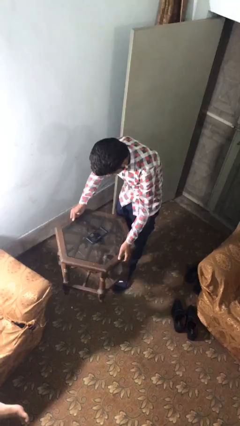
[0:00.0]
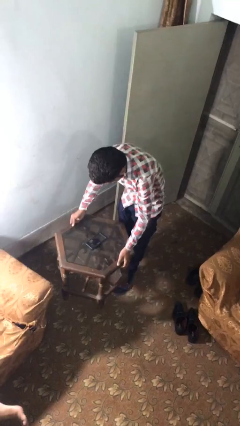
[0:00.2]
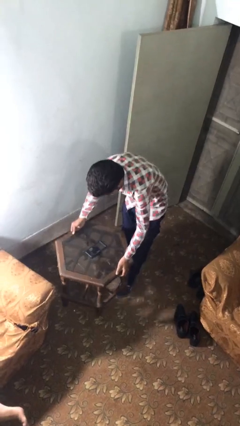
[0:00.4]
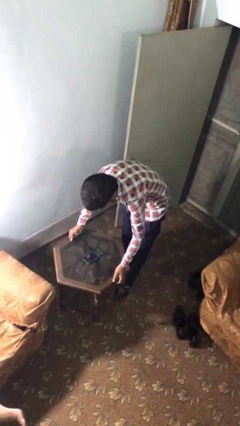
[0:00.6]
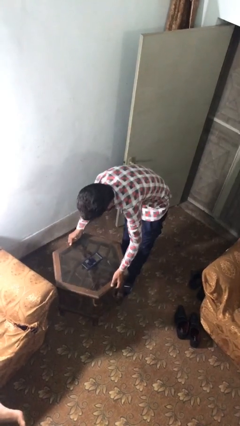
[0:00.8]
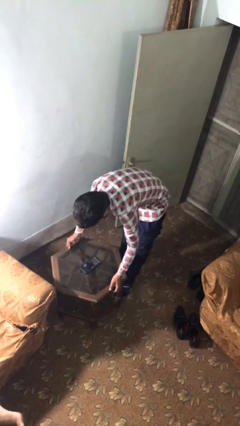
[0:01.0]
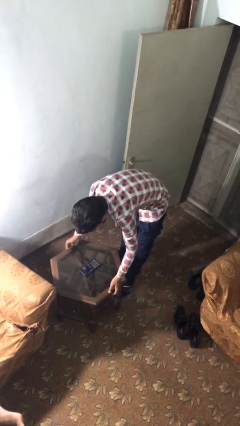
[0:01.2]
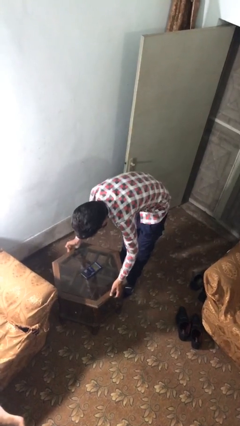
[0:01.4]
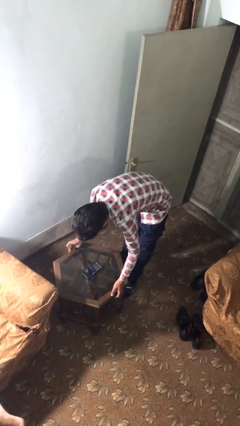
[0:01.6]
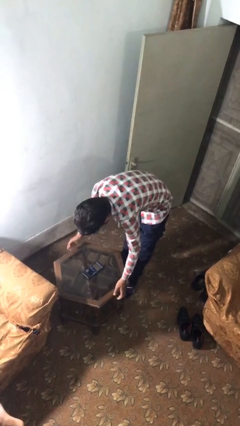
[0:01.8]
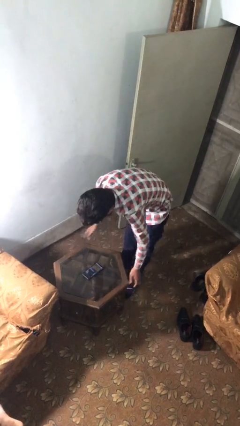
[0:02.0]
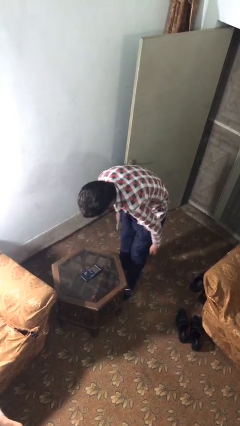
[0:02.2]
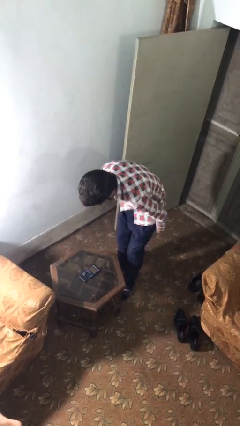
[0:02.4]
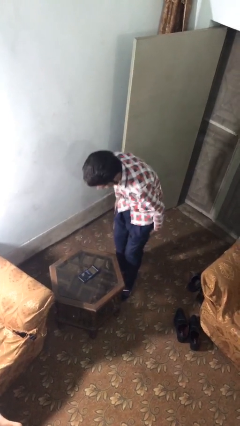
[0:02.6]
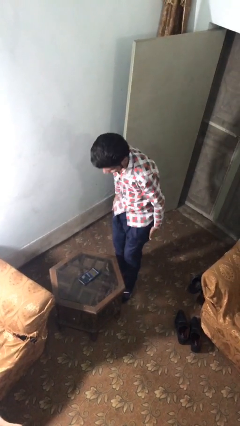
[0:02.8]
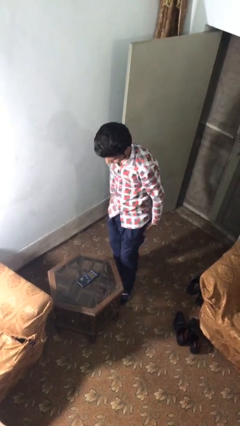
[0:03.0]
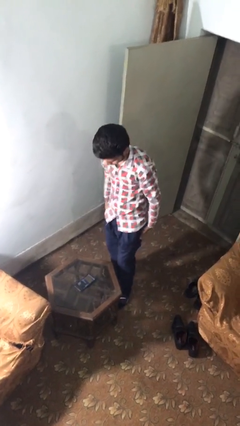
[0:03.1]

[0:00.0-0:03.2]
person puts down object on floor

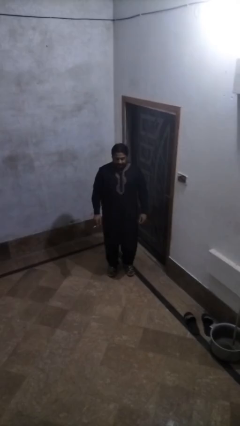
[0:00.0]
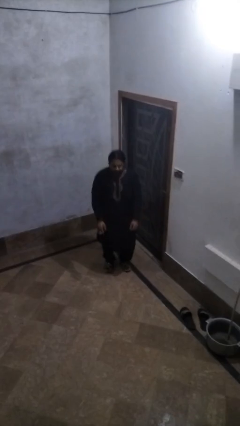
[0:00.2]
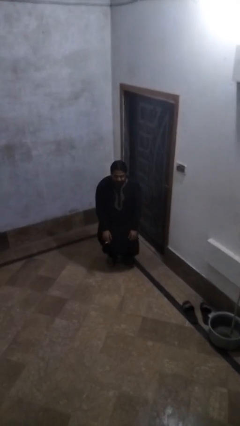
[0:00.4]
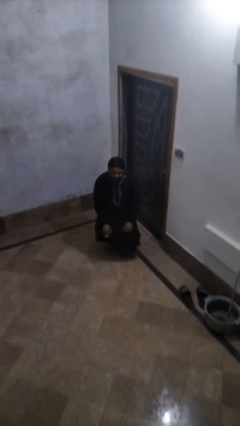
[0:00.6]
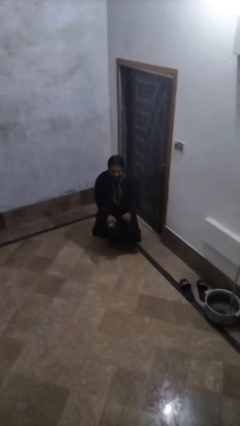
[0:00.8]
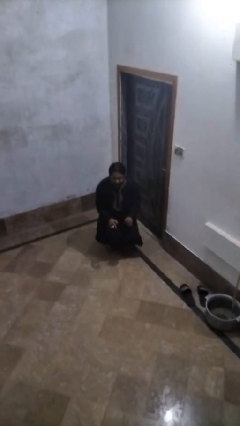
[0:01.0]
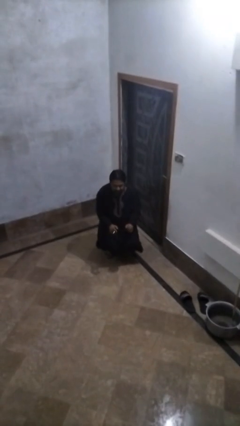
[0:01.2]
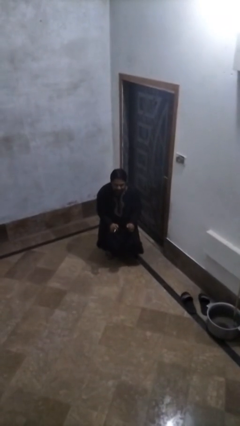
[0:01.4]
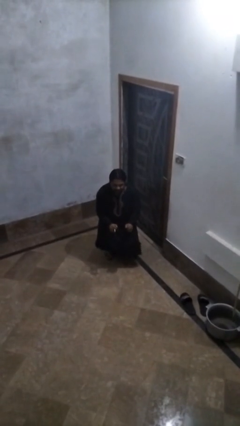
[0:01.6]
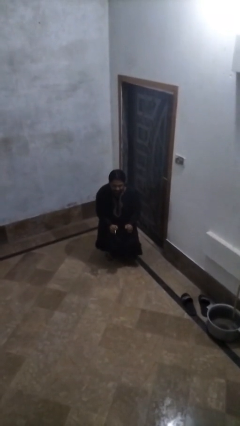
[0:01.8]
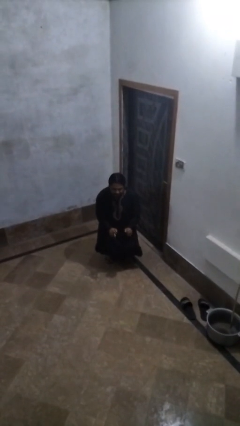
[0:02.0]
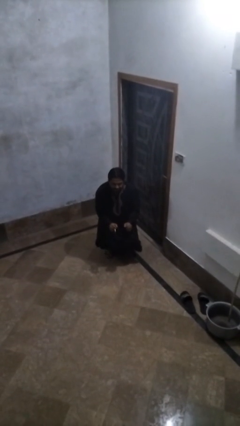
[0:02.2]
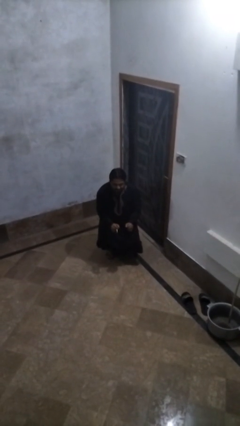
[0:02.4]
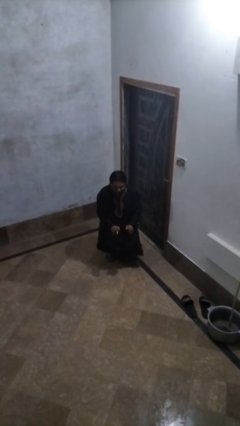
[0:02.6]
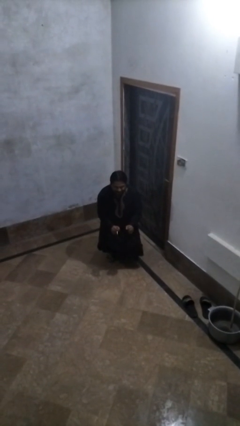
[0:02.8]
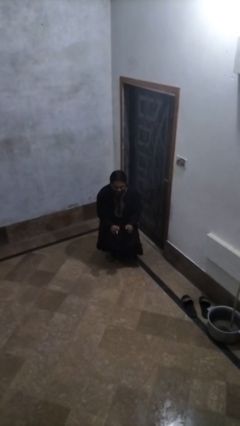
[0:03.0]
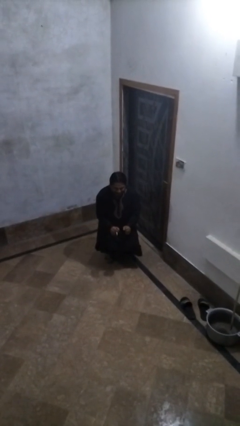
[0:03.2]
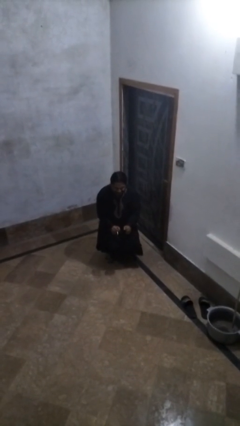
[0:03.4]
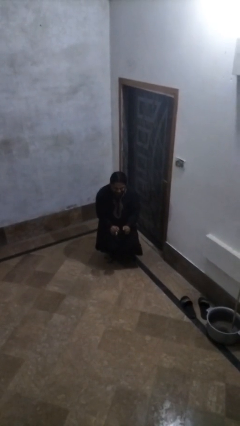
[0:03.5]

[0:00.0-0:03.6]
person squats

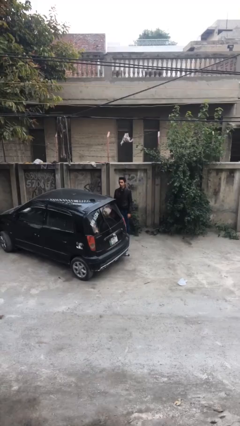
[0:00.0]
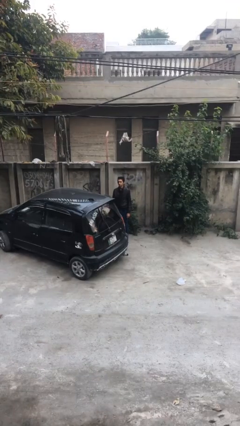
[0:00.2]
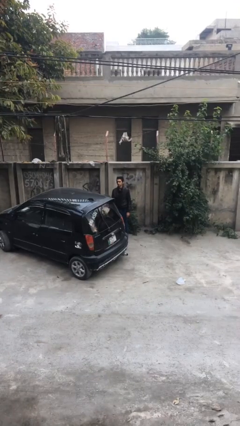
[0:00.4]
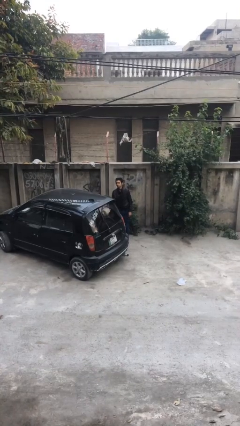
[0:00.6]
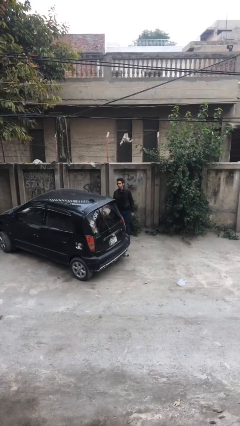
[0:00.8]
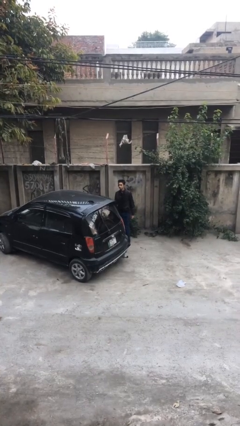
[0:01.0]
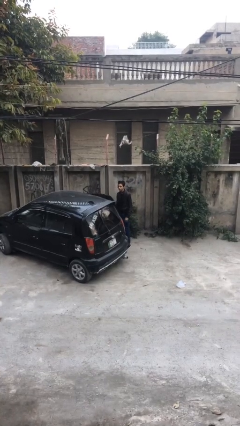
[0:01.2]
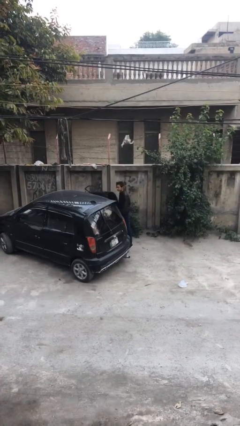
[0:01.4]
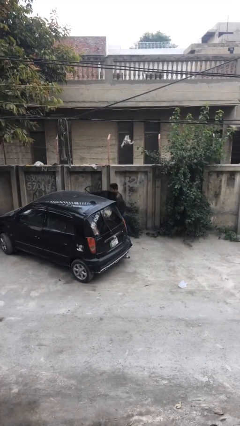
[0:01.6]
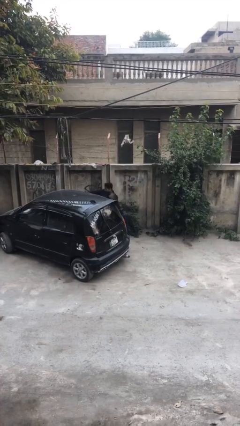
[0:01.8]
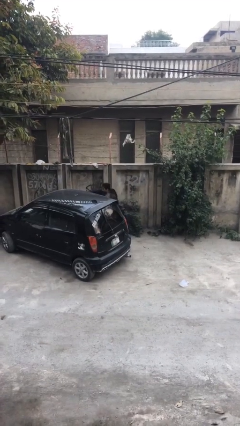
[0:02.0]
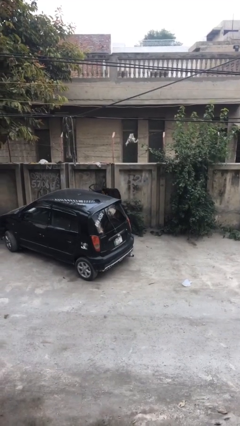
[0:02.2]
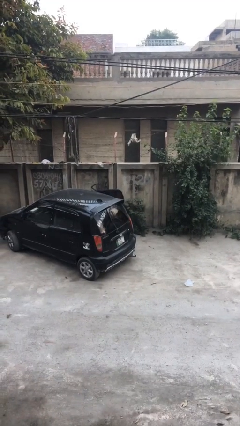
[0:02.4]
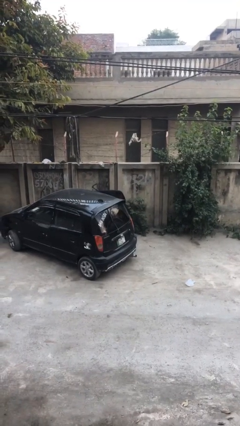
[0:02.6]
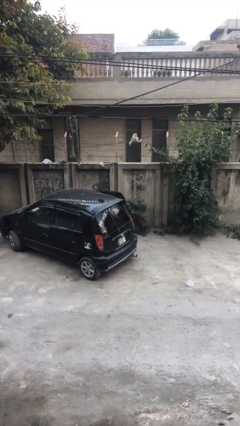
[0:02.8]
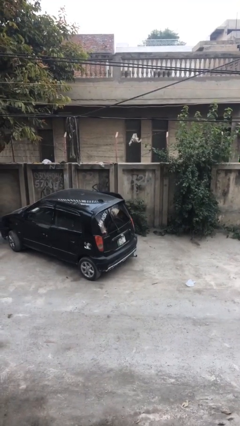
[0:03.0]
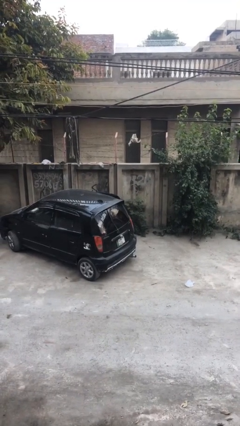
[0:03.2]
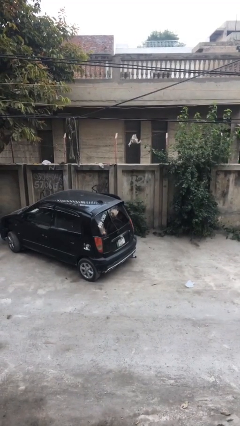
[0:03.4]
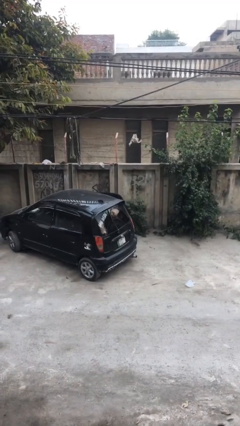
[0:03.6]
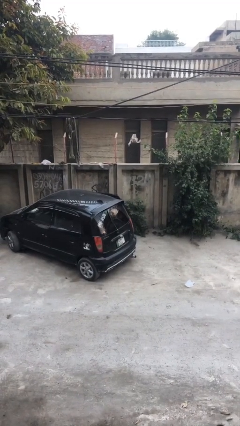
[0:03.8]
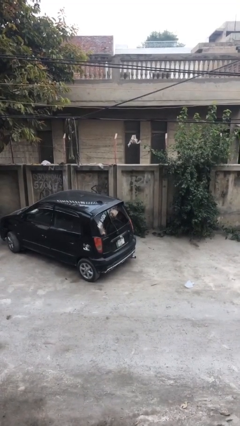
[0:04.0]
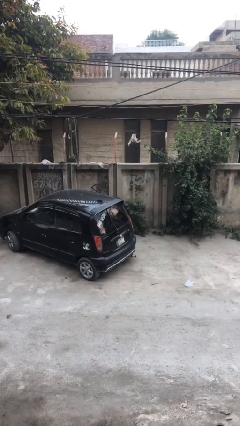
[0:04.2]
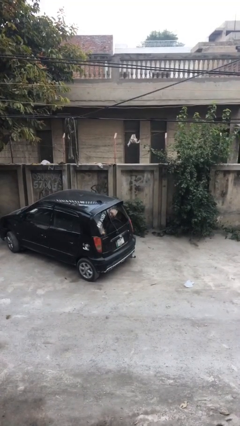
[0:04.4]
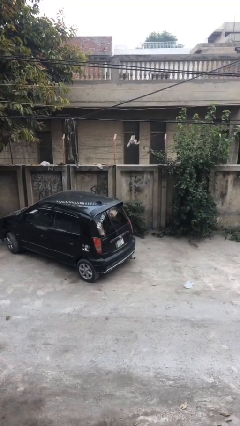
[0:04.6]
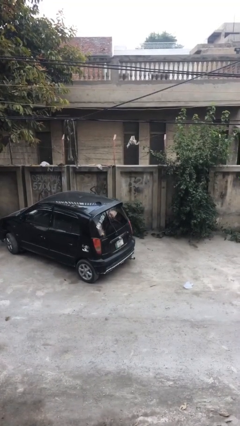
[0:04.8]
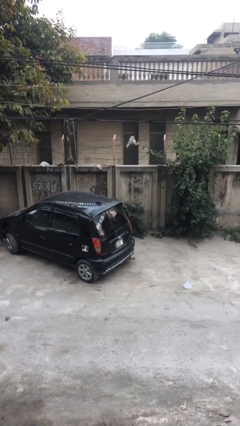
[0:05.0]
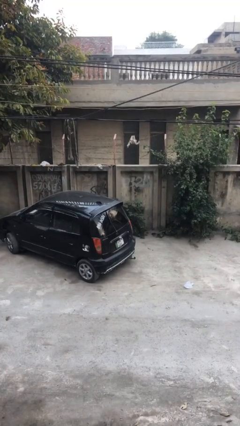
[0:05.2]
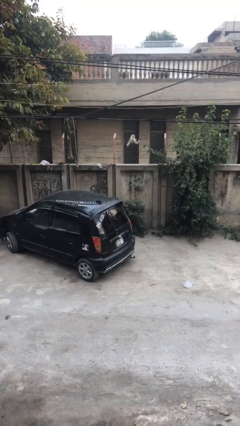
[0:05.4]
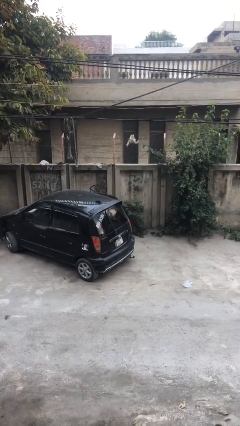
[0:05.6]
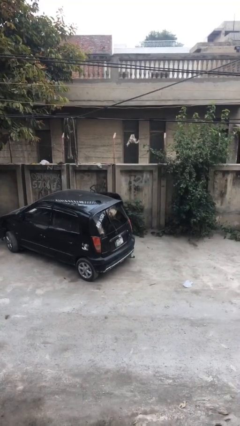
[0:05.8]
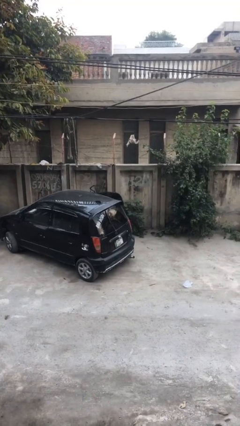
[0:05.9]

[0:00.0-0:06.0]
person enters car

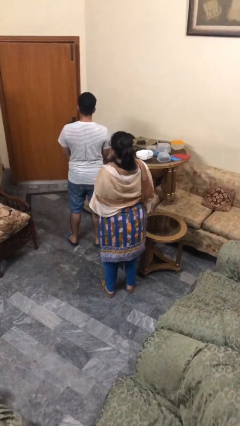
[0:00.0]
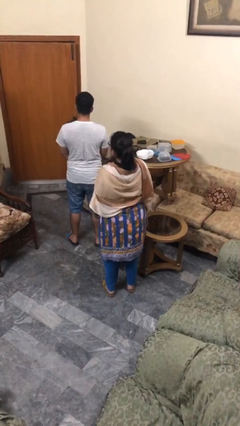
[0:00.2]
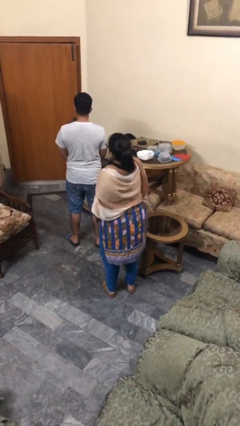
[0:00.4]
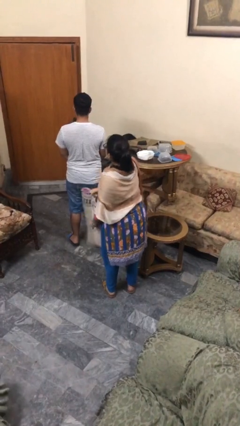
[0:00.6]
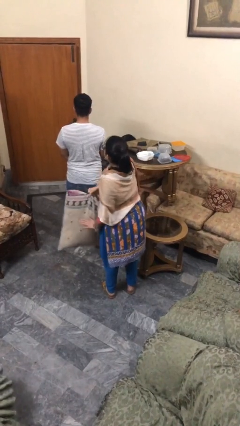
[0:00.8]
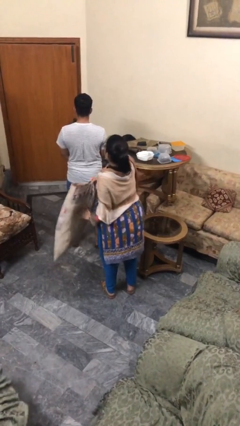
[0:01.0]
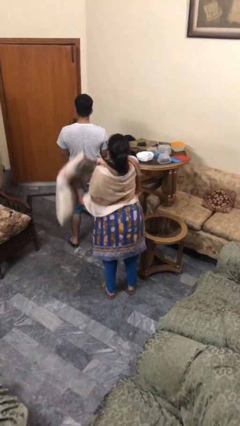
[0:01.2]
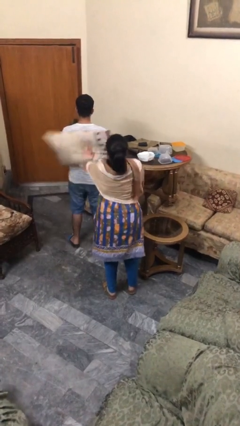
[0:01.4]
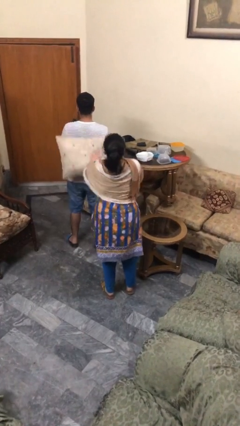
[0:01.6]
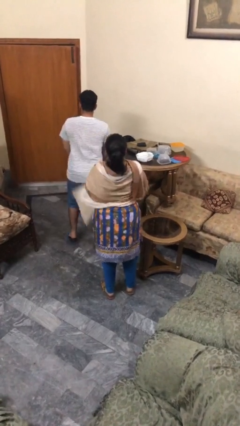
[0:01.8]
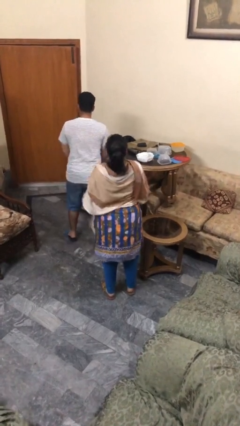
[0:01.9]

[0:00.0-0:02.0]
person hits person with pillow

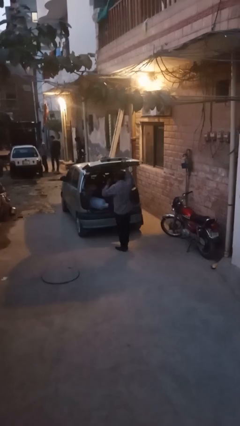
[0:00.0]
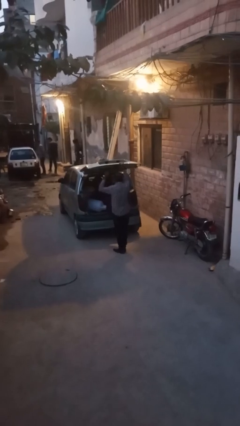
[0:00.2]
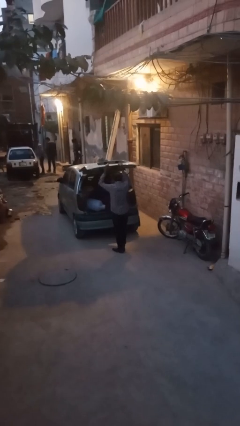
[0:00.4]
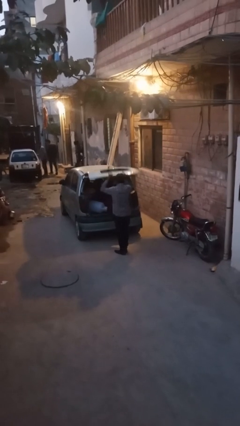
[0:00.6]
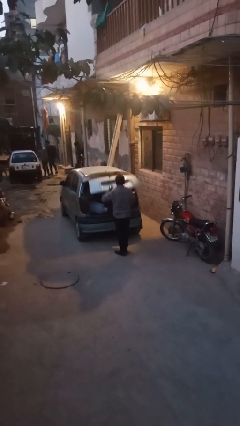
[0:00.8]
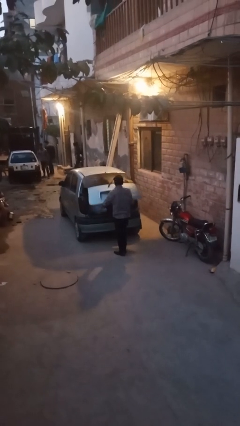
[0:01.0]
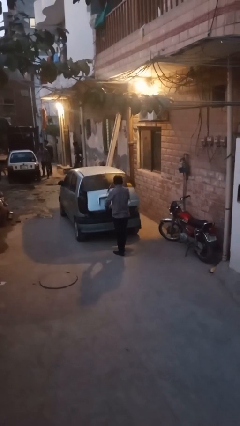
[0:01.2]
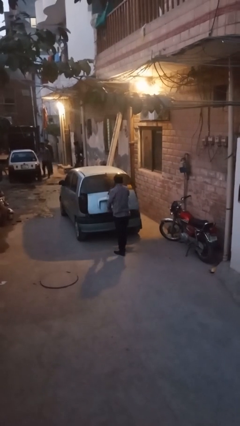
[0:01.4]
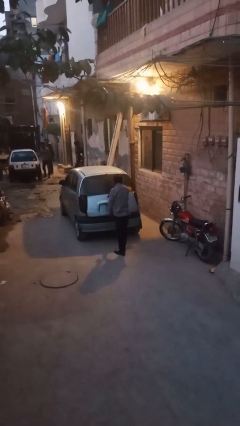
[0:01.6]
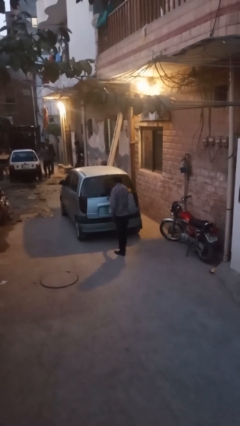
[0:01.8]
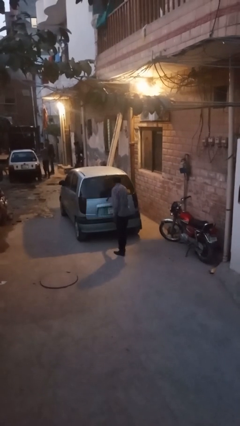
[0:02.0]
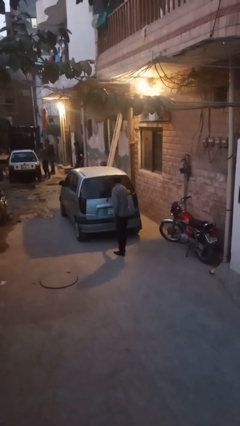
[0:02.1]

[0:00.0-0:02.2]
person closes car trunk

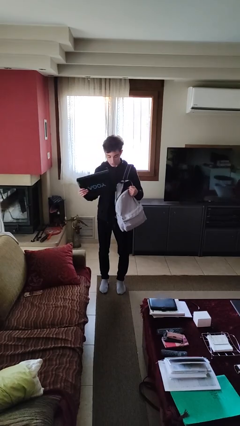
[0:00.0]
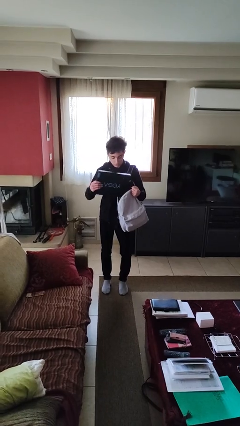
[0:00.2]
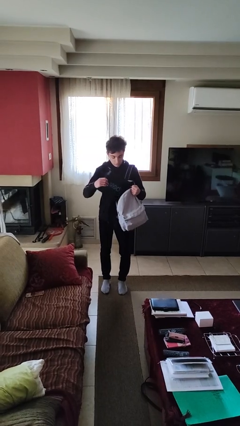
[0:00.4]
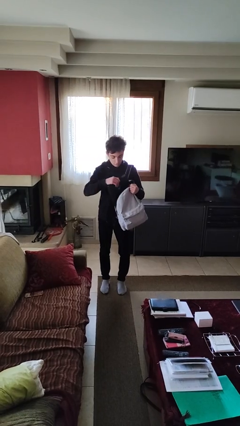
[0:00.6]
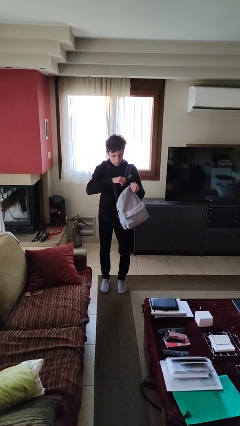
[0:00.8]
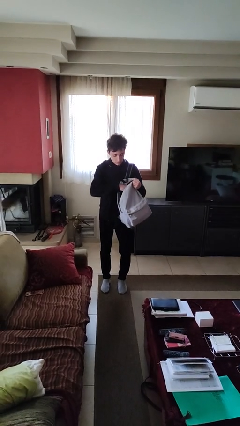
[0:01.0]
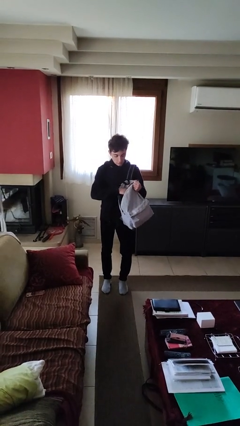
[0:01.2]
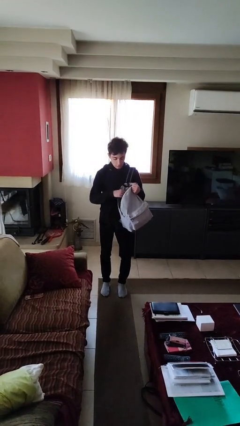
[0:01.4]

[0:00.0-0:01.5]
person puts object into backpack
